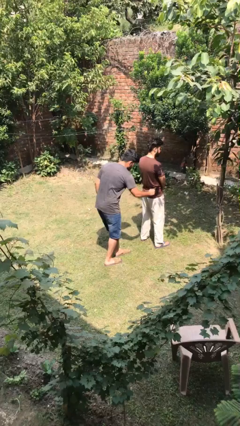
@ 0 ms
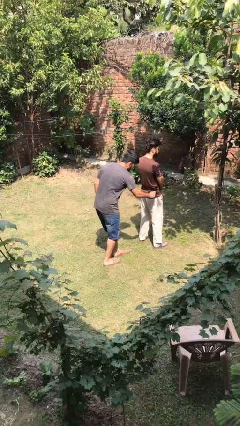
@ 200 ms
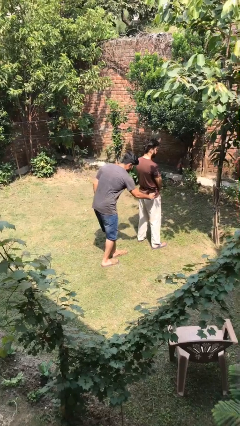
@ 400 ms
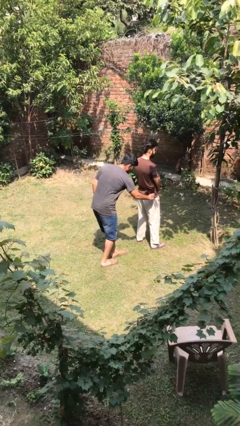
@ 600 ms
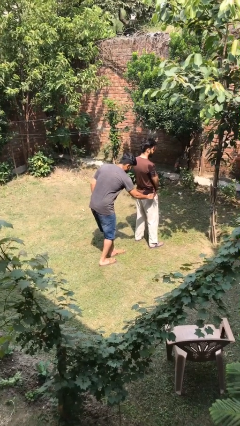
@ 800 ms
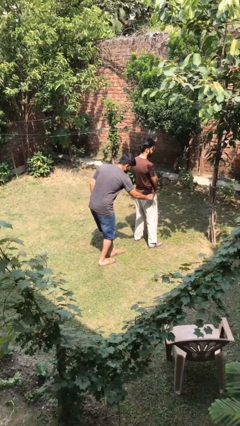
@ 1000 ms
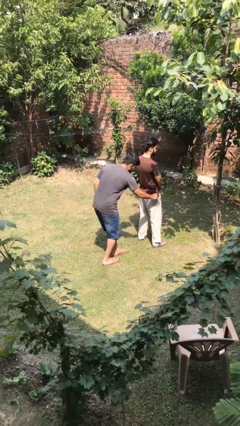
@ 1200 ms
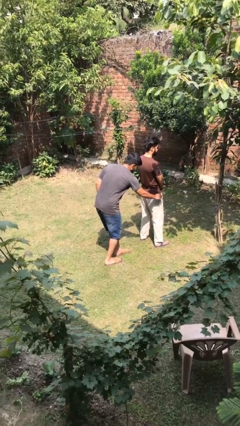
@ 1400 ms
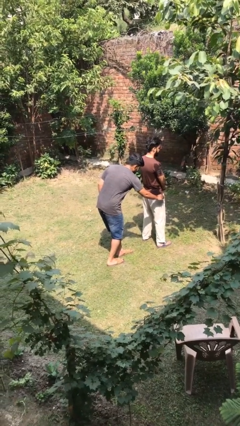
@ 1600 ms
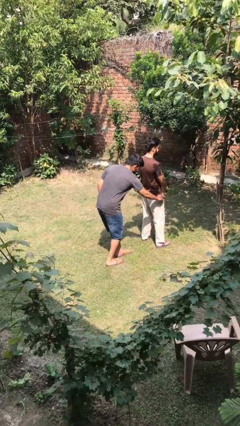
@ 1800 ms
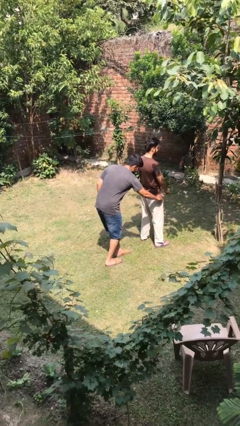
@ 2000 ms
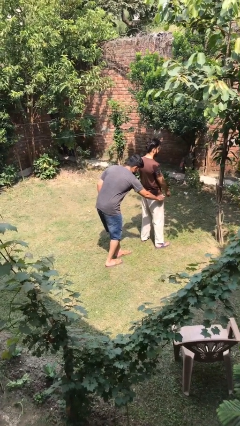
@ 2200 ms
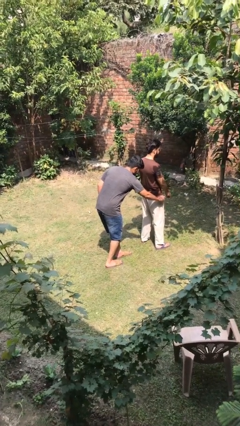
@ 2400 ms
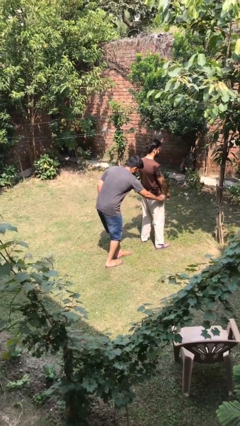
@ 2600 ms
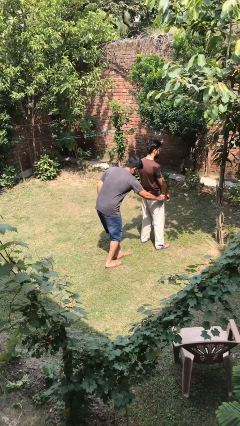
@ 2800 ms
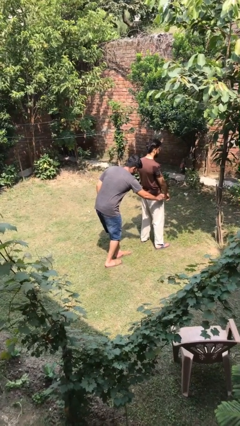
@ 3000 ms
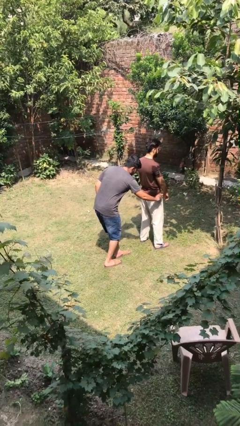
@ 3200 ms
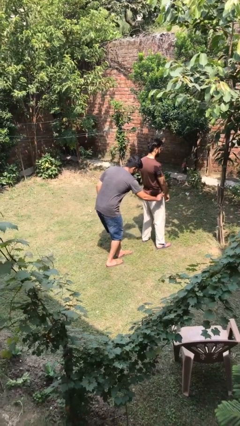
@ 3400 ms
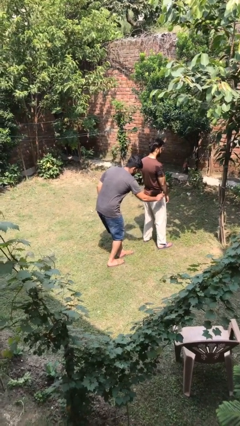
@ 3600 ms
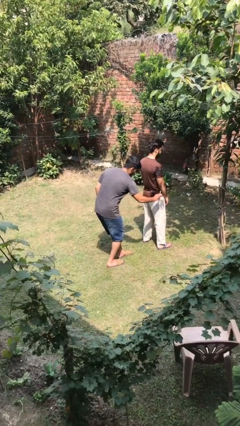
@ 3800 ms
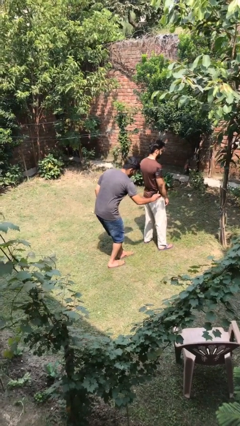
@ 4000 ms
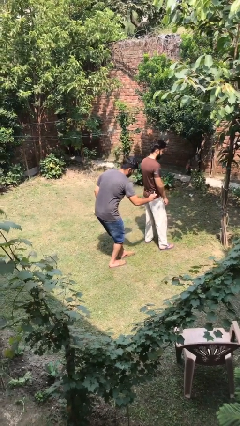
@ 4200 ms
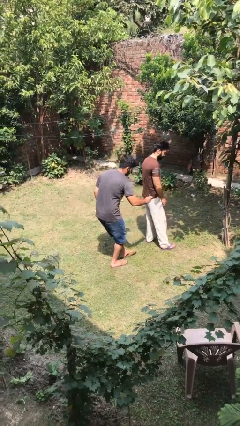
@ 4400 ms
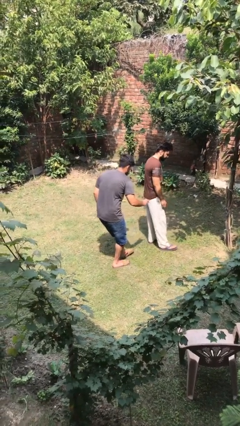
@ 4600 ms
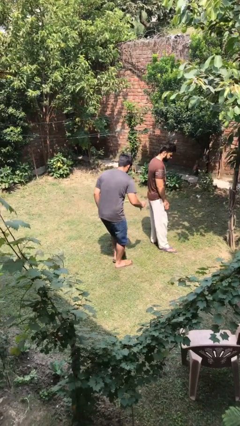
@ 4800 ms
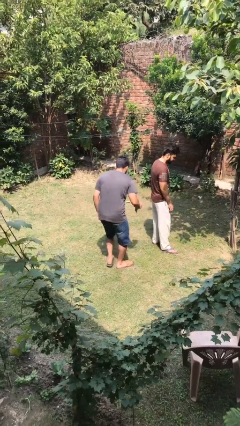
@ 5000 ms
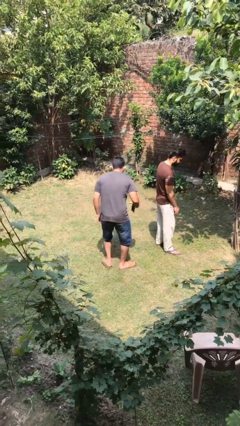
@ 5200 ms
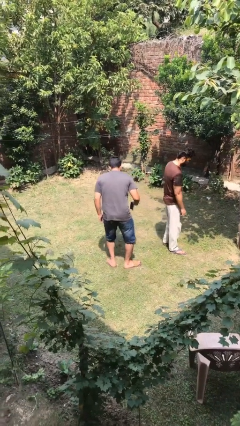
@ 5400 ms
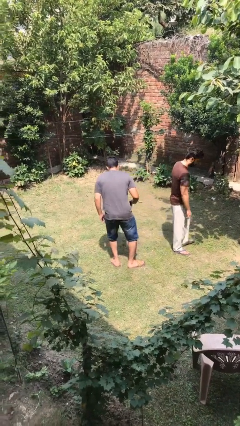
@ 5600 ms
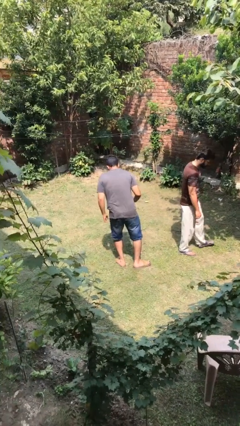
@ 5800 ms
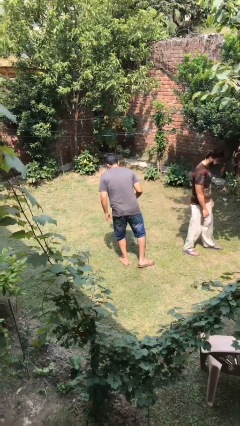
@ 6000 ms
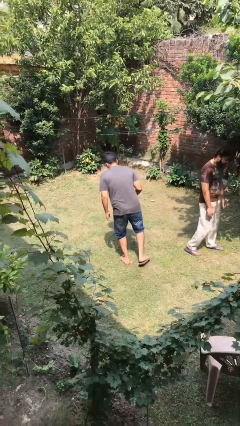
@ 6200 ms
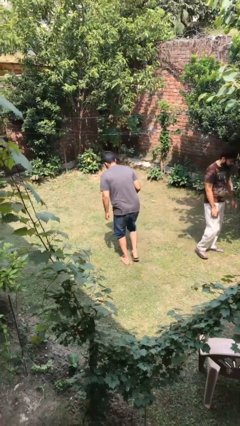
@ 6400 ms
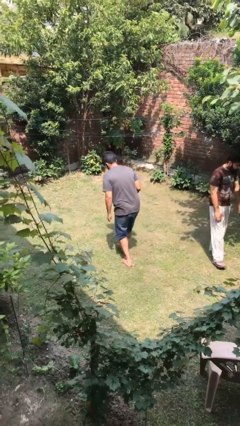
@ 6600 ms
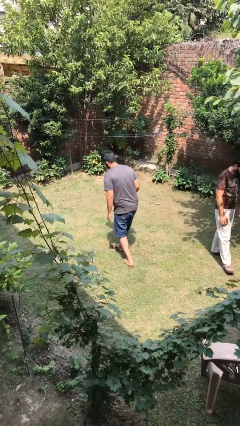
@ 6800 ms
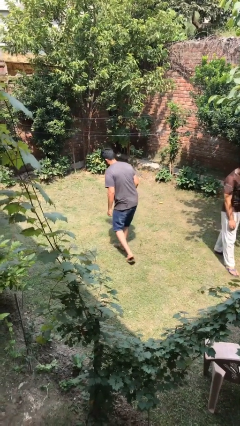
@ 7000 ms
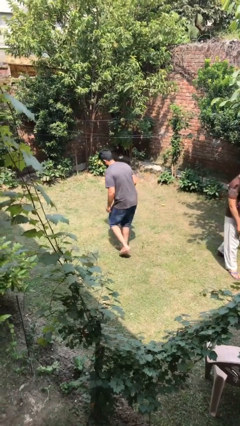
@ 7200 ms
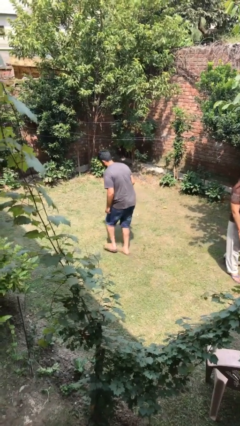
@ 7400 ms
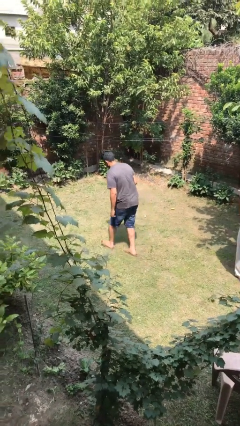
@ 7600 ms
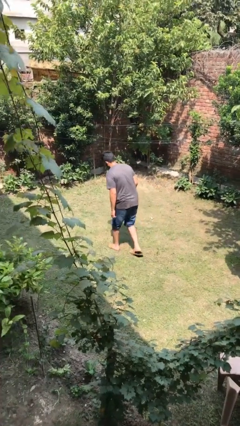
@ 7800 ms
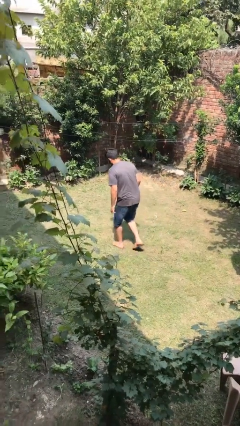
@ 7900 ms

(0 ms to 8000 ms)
person steals object from person

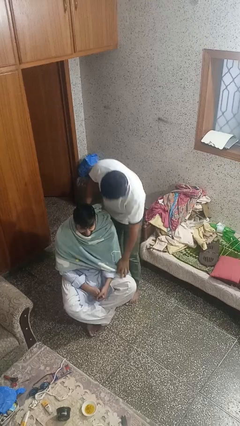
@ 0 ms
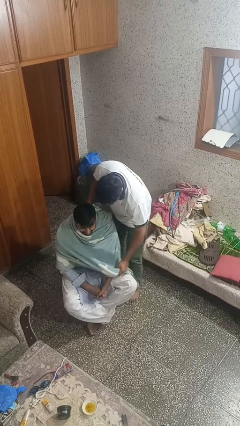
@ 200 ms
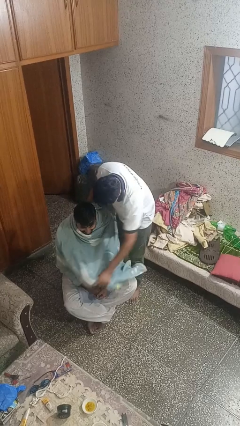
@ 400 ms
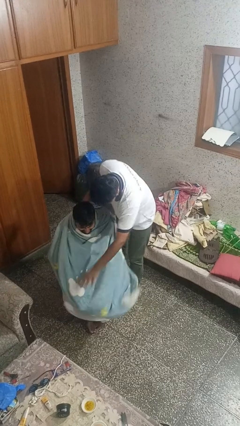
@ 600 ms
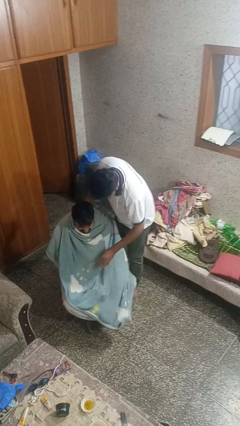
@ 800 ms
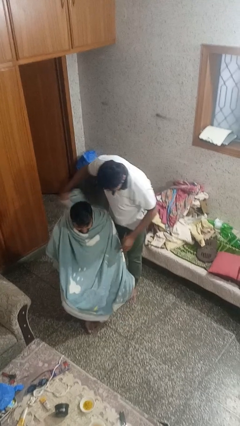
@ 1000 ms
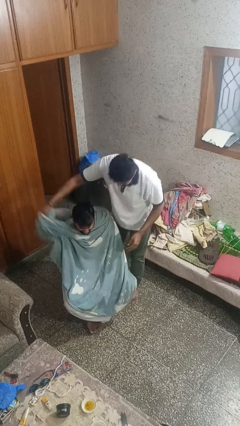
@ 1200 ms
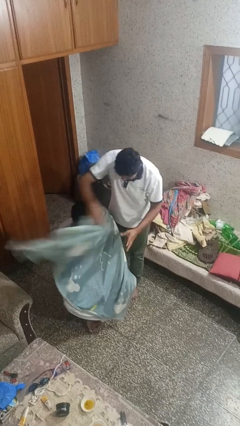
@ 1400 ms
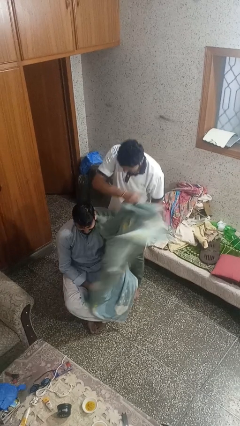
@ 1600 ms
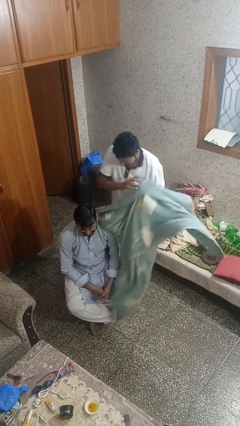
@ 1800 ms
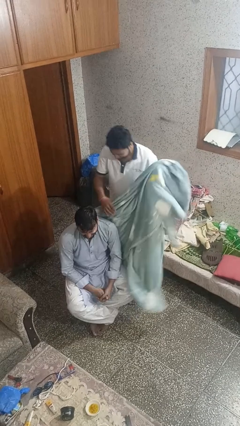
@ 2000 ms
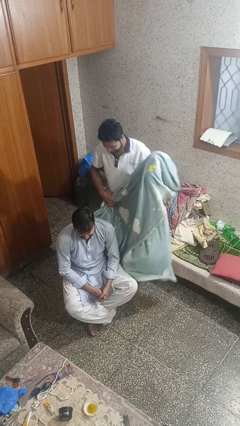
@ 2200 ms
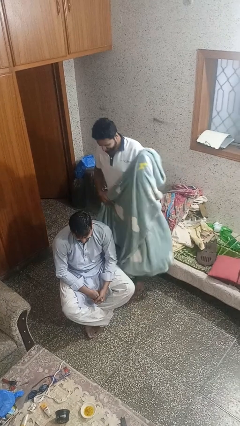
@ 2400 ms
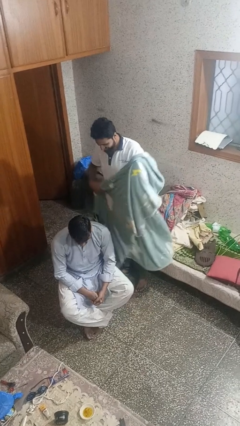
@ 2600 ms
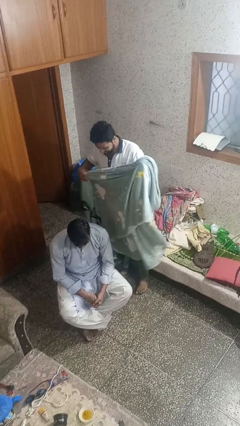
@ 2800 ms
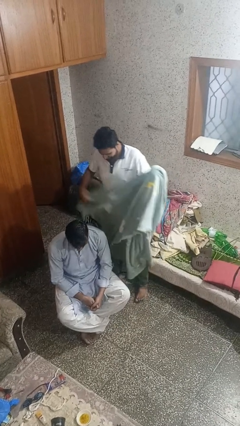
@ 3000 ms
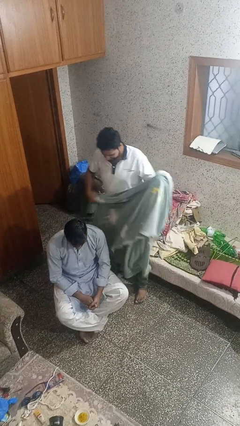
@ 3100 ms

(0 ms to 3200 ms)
person uncovers friend with blanket

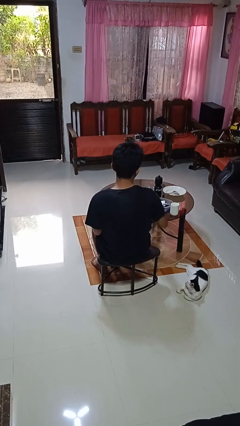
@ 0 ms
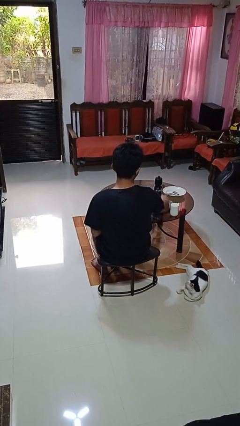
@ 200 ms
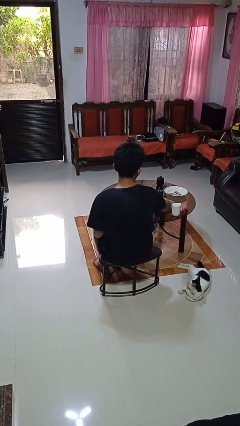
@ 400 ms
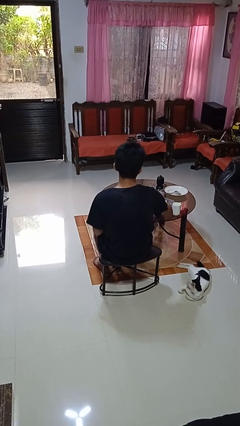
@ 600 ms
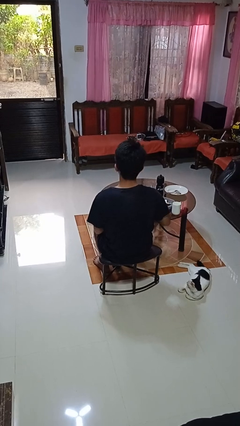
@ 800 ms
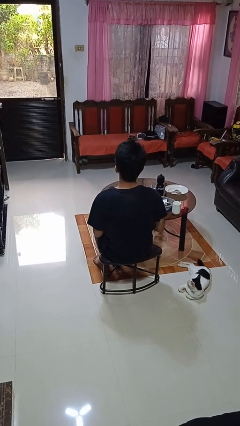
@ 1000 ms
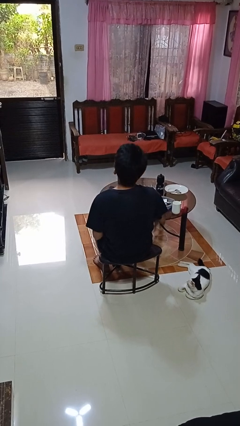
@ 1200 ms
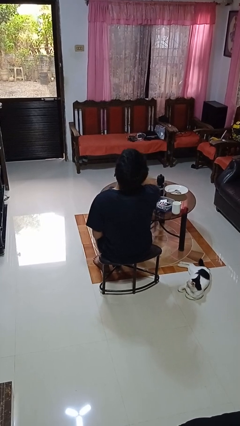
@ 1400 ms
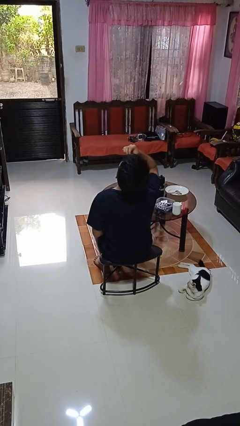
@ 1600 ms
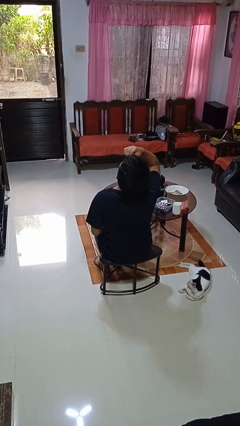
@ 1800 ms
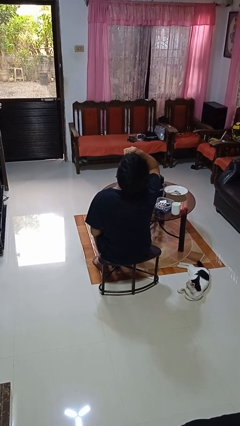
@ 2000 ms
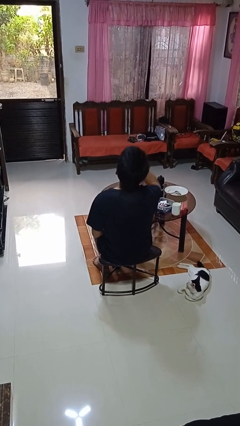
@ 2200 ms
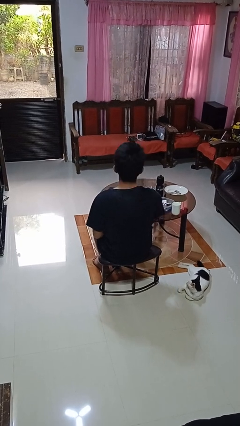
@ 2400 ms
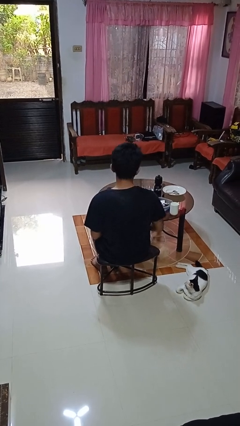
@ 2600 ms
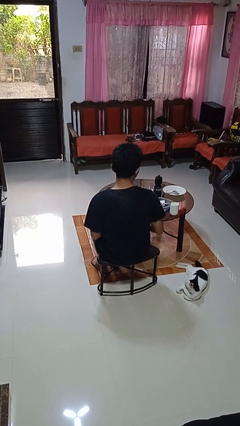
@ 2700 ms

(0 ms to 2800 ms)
person takes medicine pills

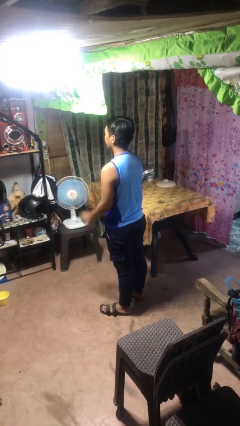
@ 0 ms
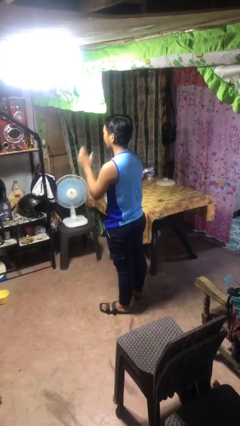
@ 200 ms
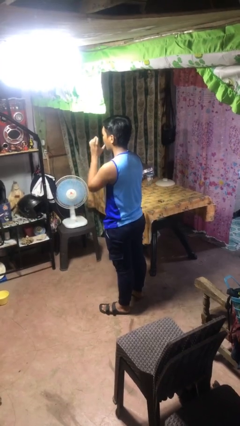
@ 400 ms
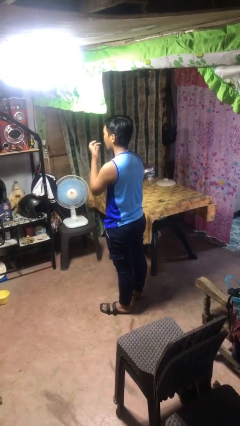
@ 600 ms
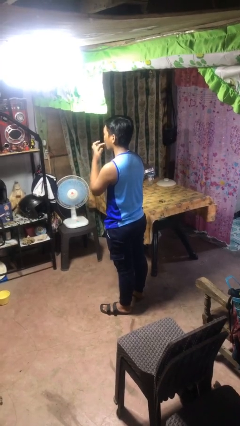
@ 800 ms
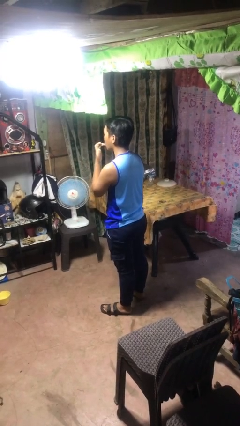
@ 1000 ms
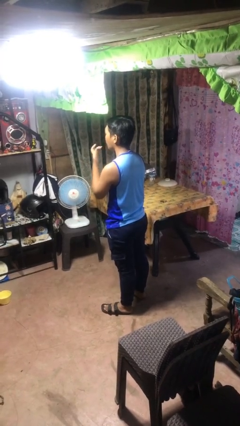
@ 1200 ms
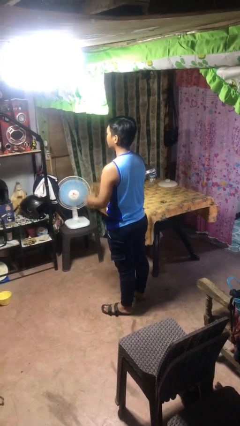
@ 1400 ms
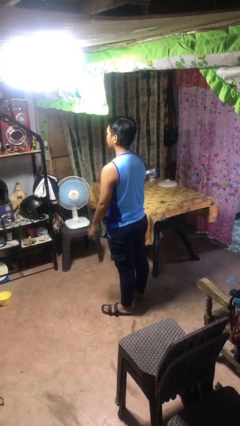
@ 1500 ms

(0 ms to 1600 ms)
person licks fingers

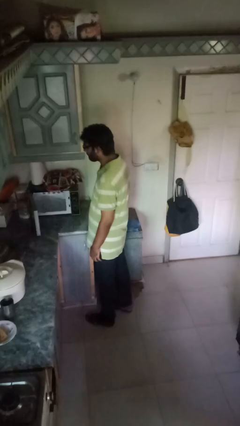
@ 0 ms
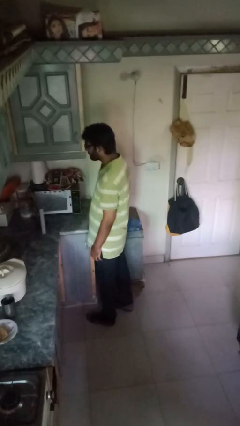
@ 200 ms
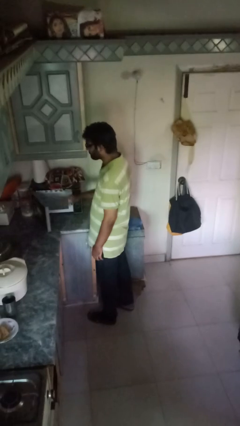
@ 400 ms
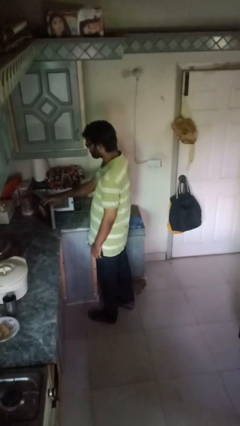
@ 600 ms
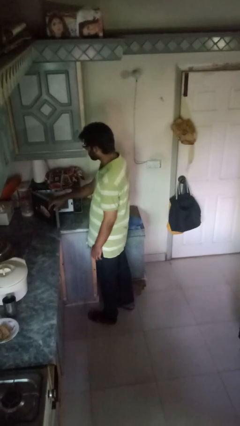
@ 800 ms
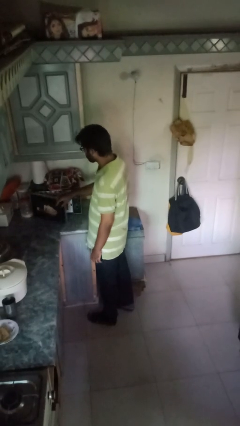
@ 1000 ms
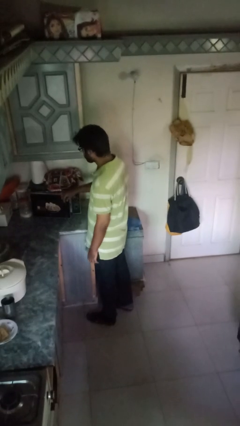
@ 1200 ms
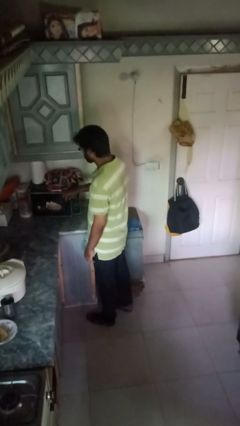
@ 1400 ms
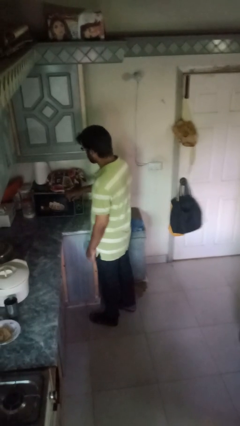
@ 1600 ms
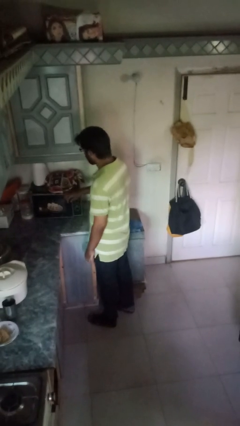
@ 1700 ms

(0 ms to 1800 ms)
person closes oven door
